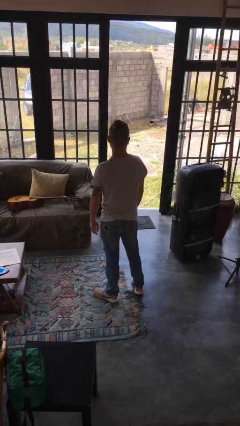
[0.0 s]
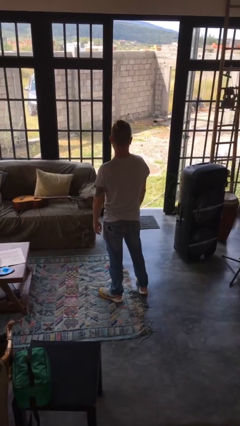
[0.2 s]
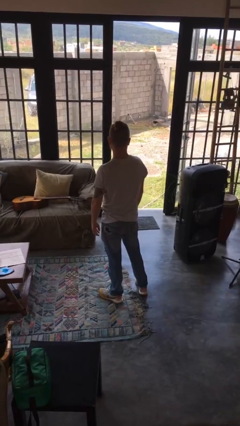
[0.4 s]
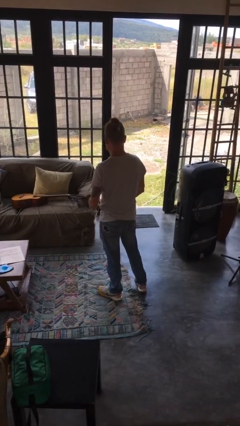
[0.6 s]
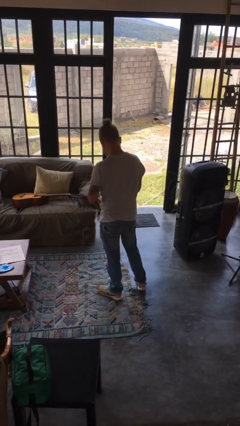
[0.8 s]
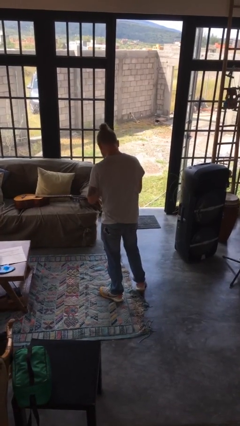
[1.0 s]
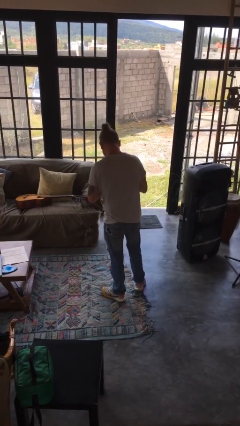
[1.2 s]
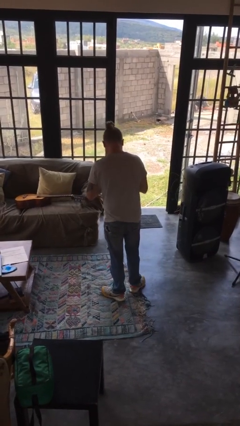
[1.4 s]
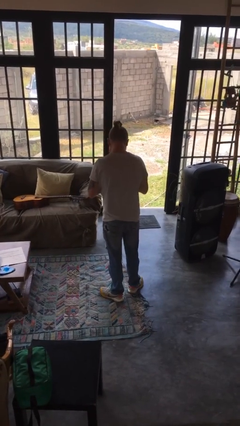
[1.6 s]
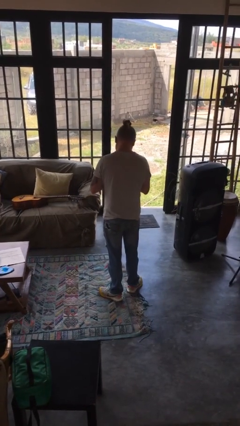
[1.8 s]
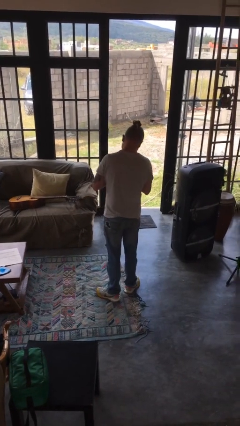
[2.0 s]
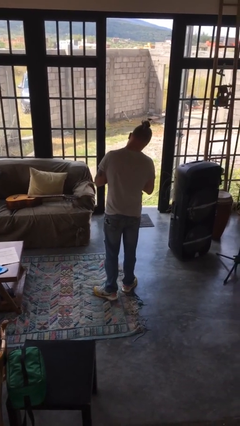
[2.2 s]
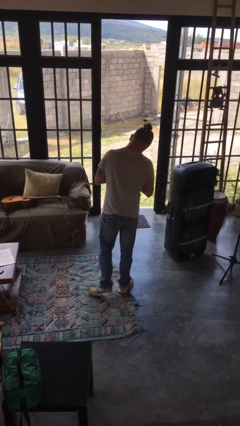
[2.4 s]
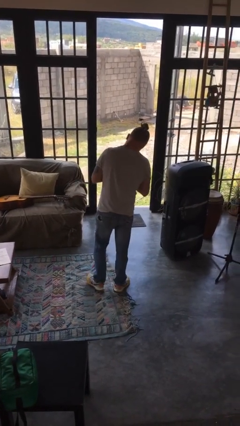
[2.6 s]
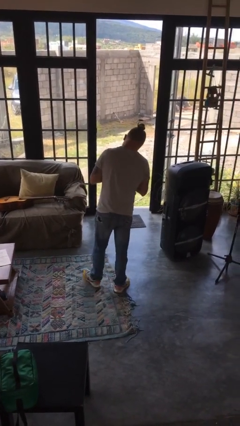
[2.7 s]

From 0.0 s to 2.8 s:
person prays

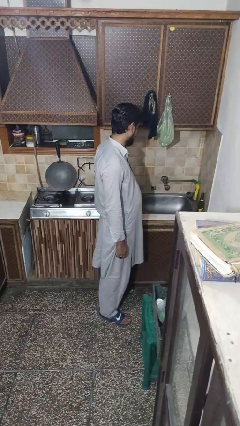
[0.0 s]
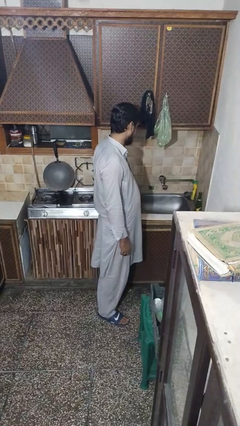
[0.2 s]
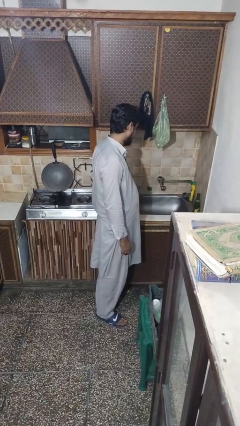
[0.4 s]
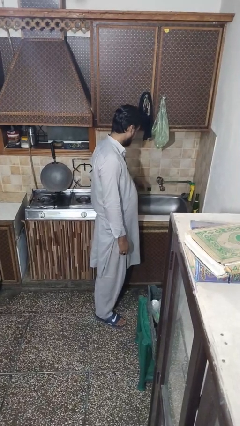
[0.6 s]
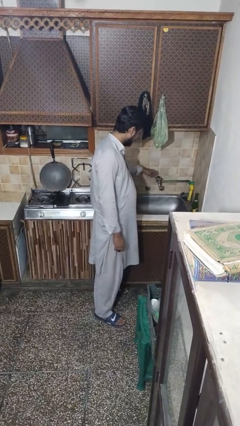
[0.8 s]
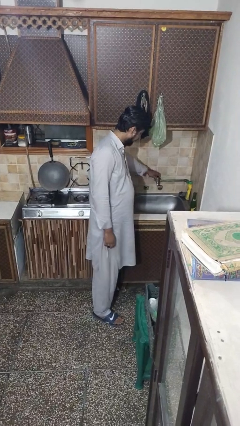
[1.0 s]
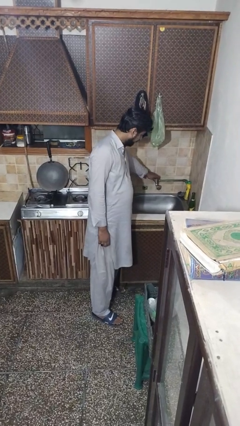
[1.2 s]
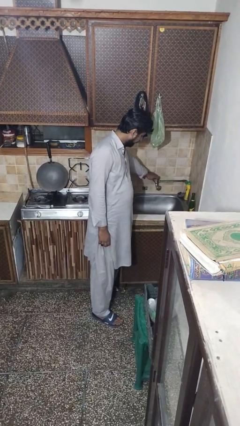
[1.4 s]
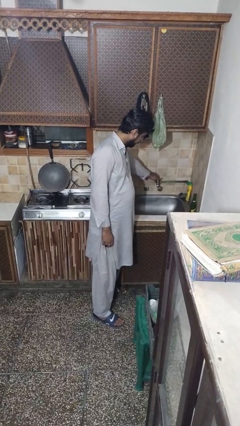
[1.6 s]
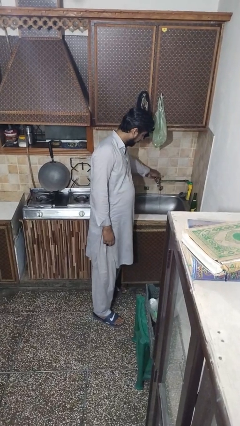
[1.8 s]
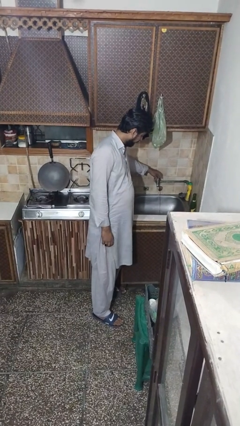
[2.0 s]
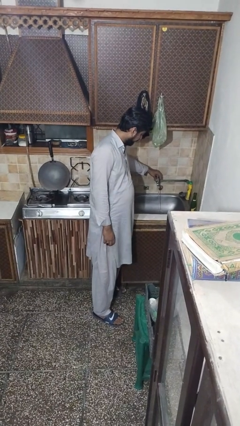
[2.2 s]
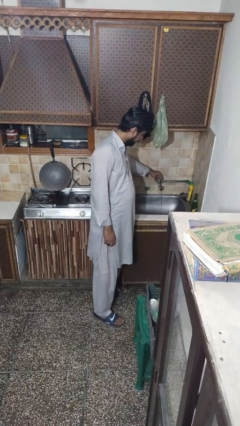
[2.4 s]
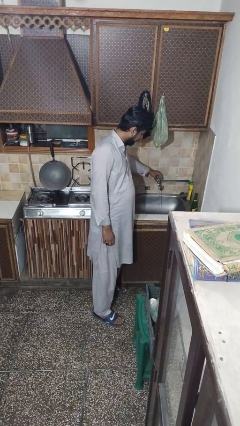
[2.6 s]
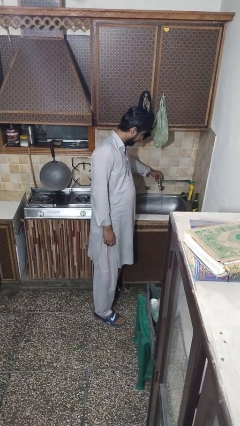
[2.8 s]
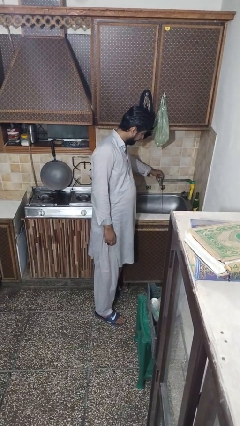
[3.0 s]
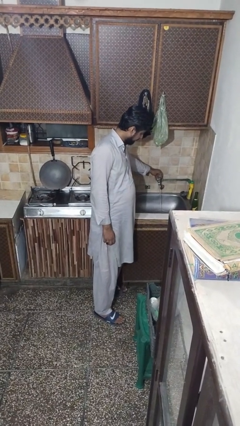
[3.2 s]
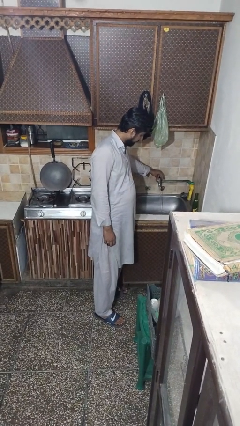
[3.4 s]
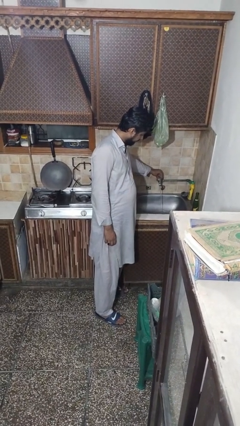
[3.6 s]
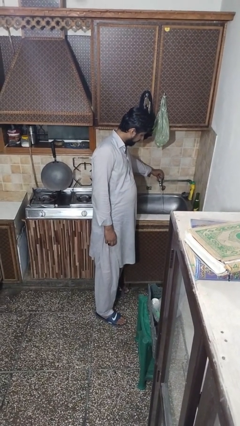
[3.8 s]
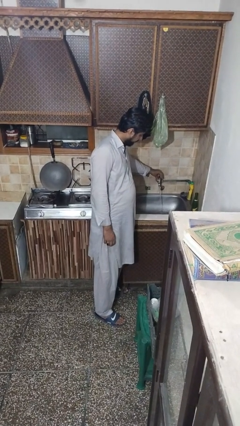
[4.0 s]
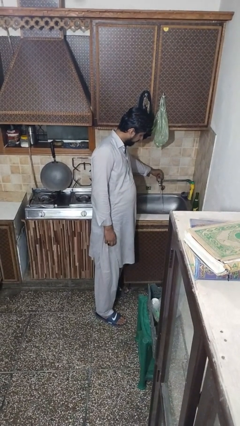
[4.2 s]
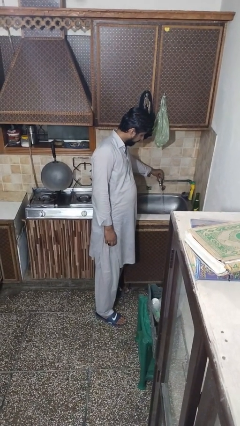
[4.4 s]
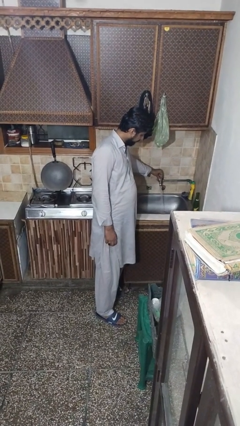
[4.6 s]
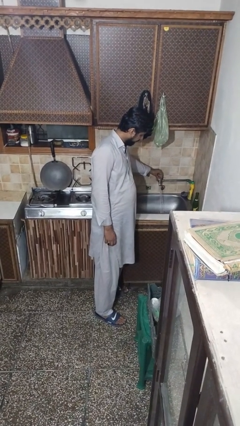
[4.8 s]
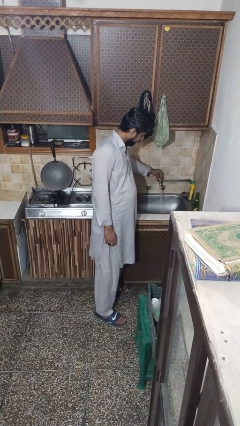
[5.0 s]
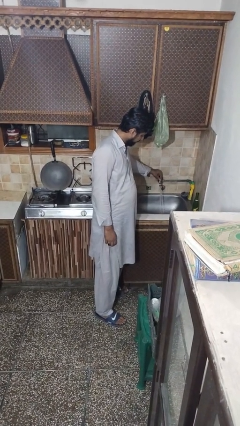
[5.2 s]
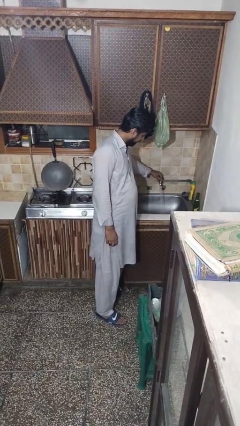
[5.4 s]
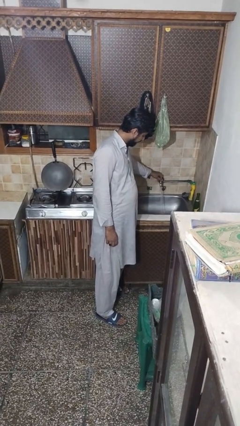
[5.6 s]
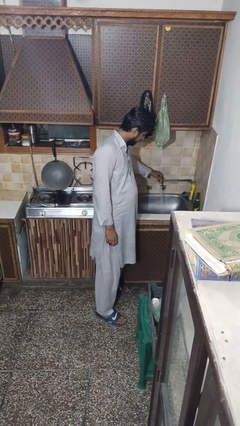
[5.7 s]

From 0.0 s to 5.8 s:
person turns on faucet

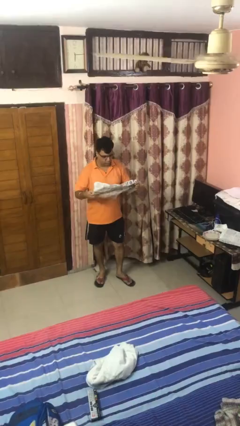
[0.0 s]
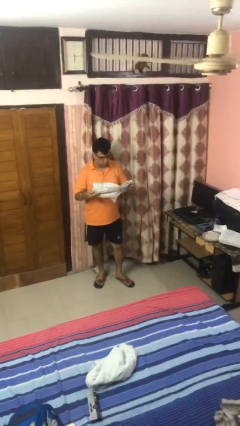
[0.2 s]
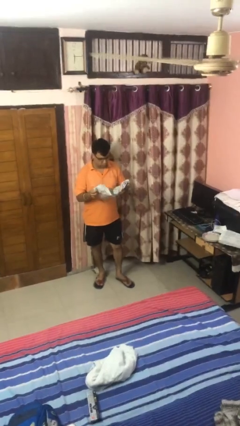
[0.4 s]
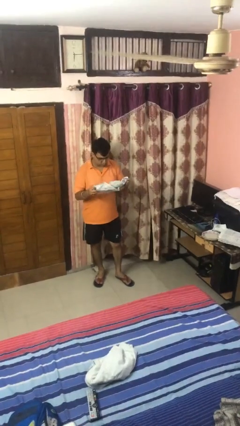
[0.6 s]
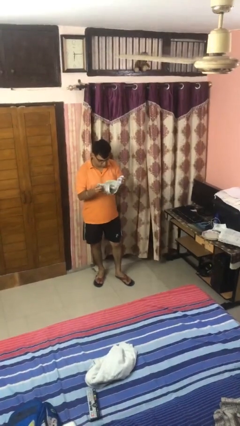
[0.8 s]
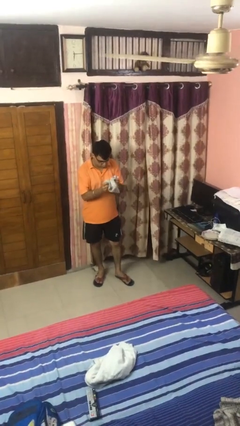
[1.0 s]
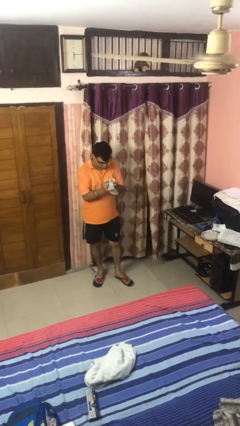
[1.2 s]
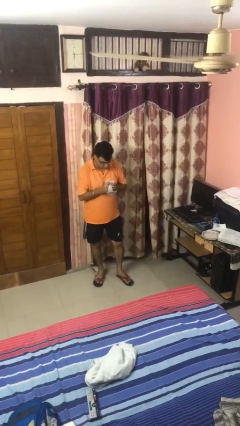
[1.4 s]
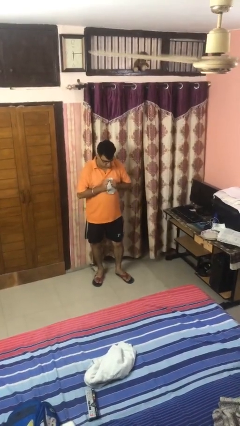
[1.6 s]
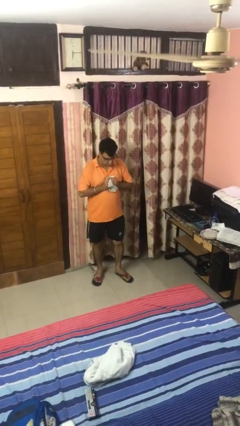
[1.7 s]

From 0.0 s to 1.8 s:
person crumples paper

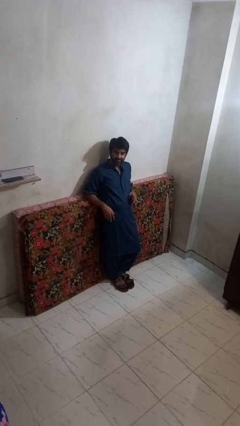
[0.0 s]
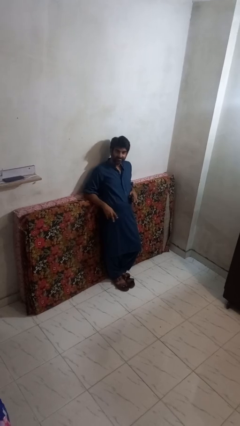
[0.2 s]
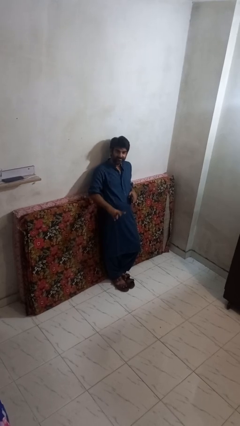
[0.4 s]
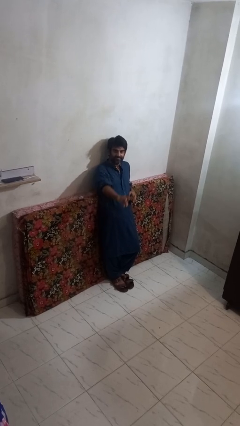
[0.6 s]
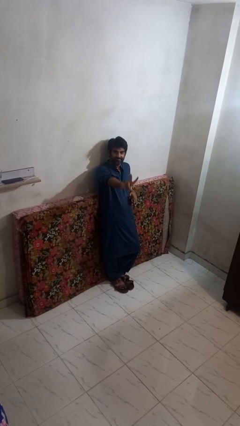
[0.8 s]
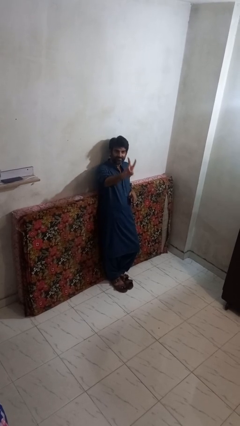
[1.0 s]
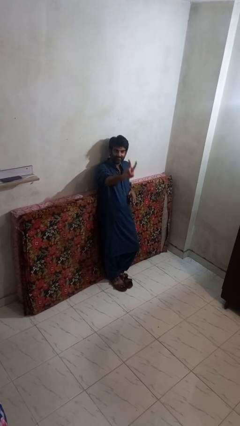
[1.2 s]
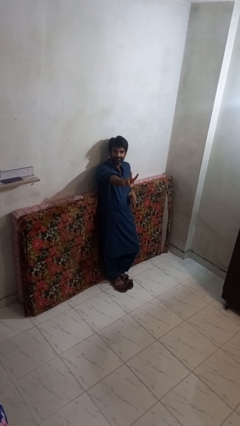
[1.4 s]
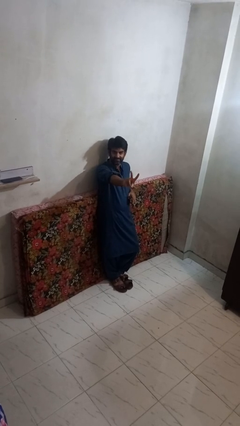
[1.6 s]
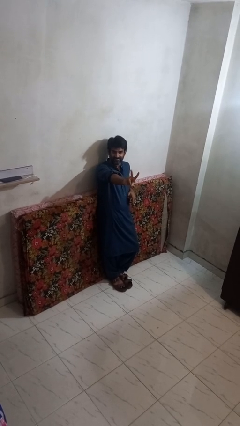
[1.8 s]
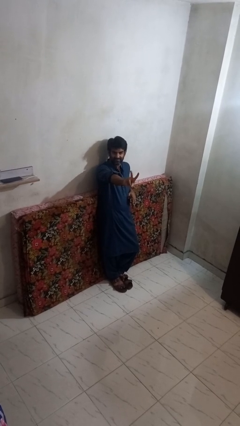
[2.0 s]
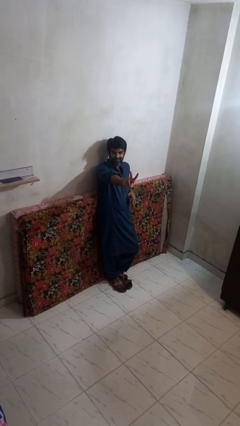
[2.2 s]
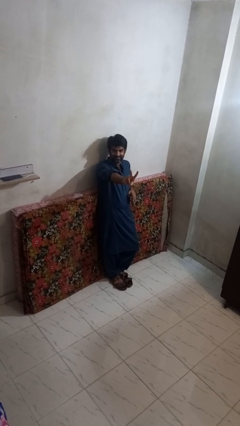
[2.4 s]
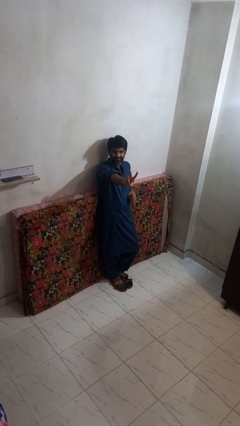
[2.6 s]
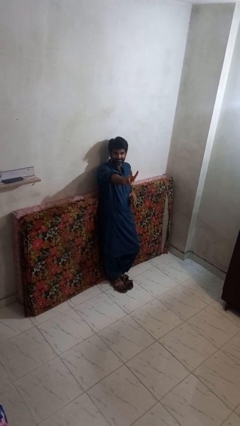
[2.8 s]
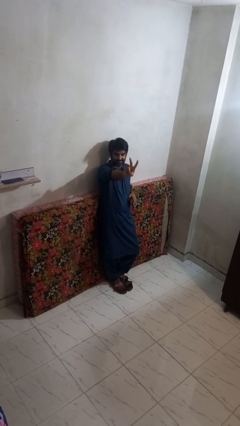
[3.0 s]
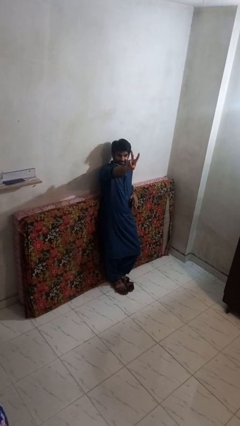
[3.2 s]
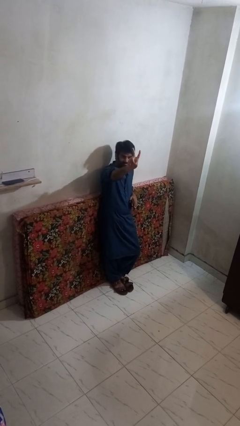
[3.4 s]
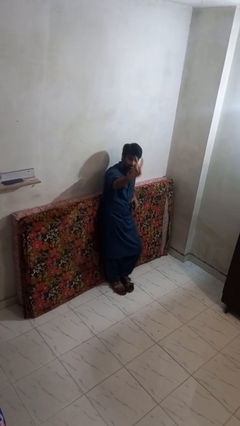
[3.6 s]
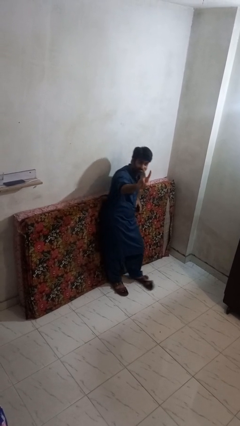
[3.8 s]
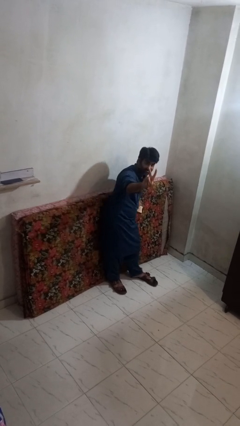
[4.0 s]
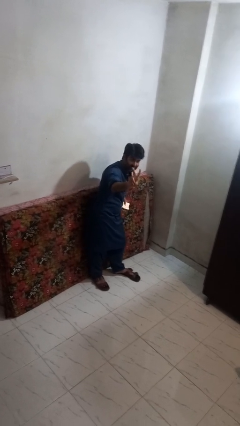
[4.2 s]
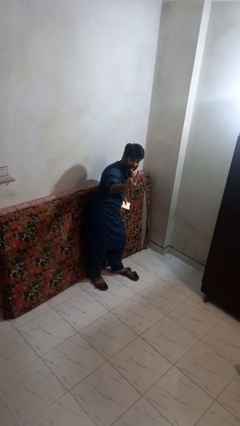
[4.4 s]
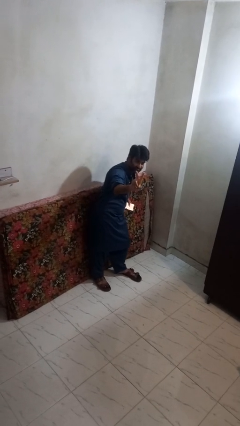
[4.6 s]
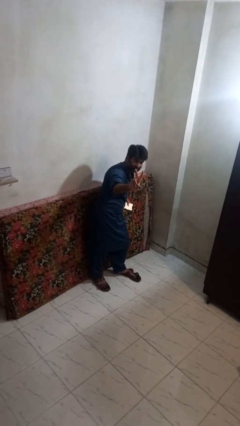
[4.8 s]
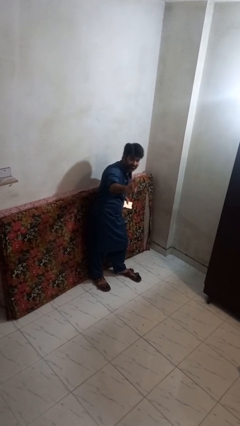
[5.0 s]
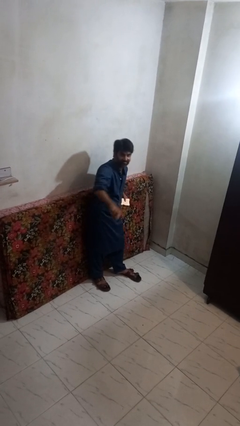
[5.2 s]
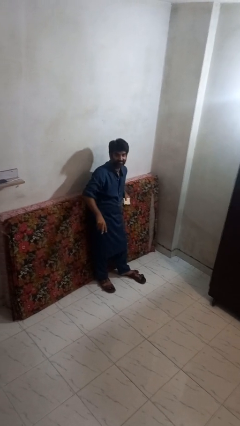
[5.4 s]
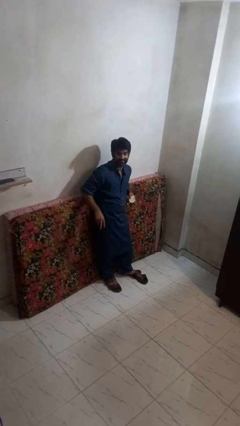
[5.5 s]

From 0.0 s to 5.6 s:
person gestures peace

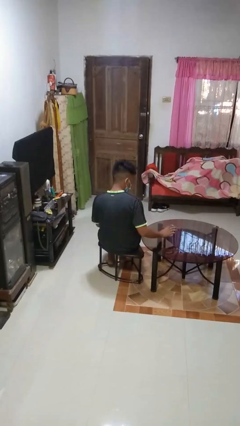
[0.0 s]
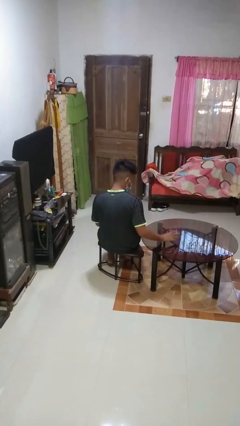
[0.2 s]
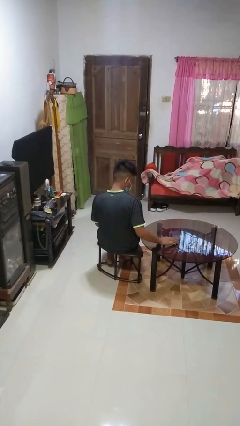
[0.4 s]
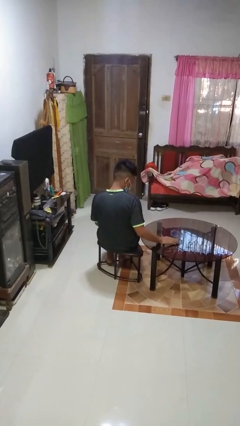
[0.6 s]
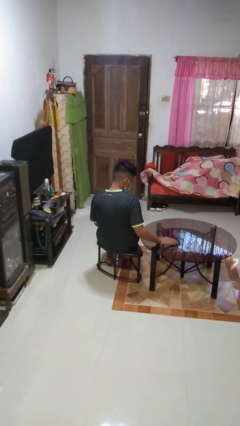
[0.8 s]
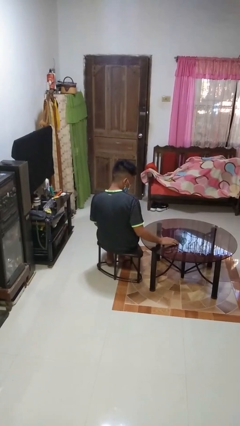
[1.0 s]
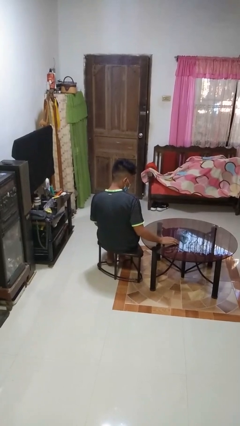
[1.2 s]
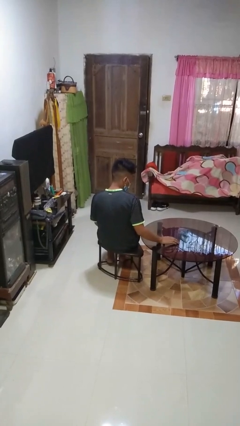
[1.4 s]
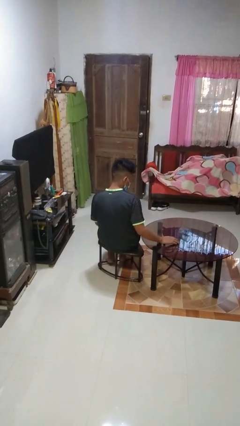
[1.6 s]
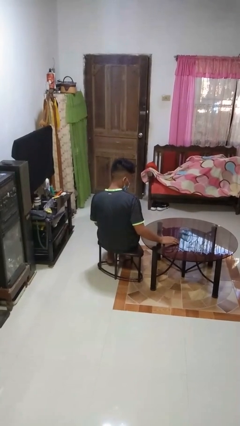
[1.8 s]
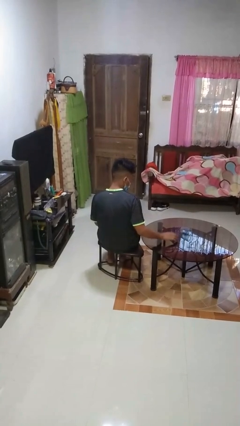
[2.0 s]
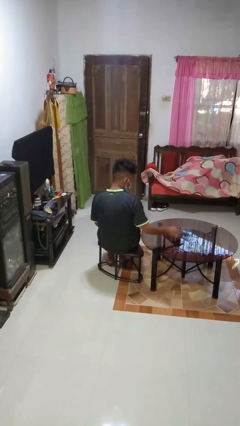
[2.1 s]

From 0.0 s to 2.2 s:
person drinks from beverage can
